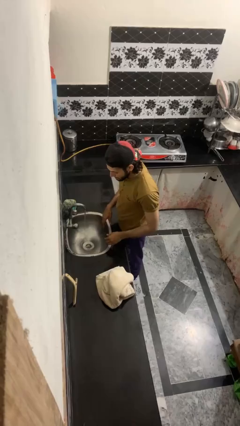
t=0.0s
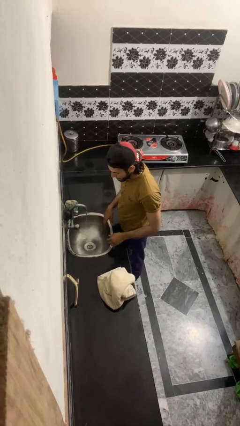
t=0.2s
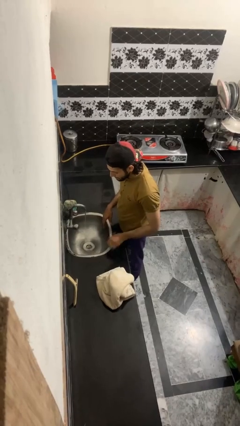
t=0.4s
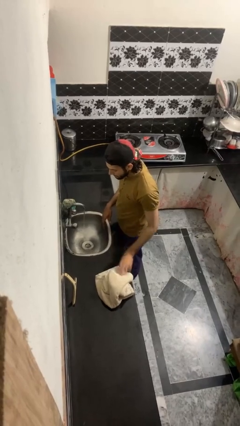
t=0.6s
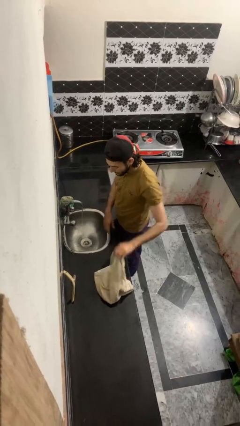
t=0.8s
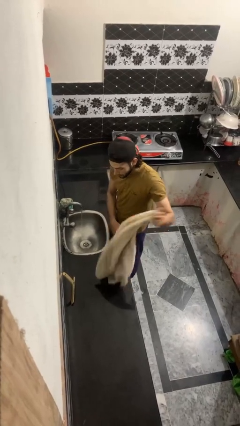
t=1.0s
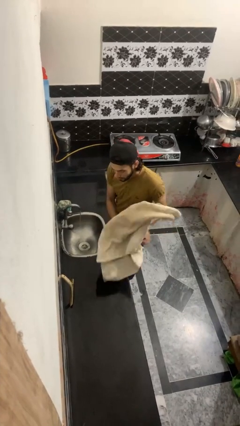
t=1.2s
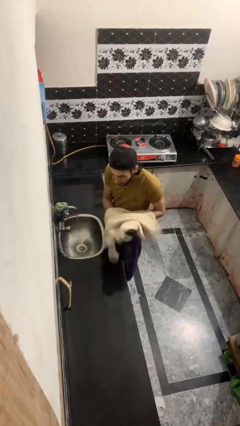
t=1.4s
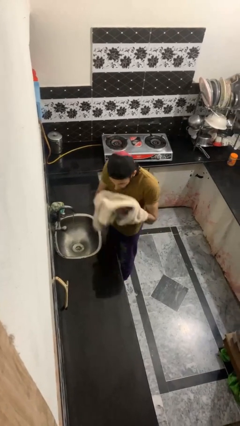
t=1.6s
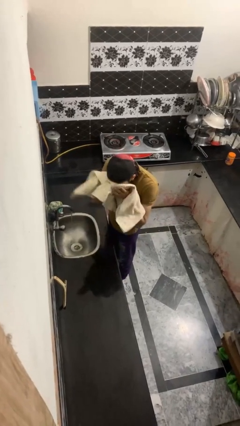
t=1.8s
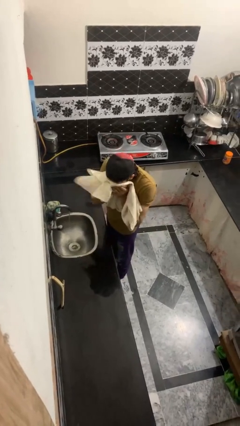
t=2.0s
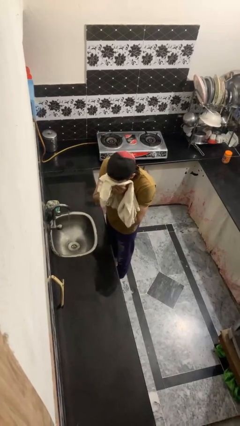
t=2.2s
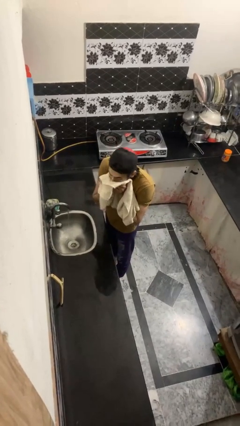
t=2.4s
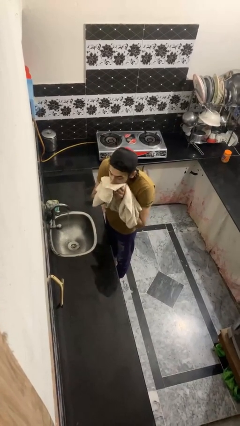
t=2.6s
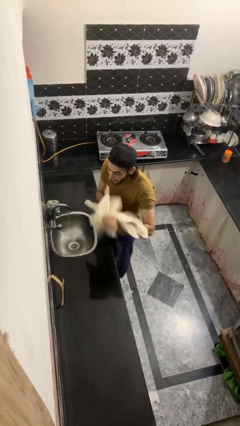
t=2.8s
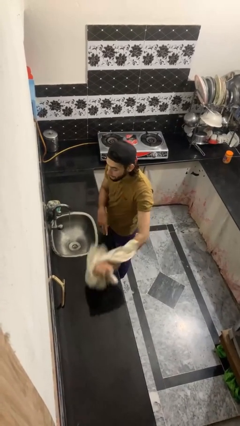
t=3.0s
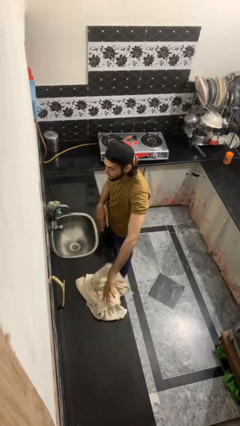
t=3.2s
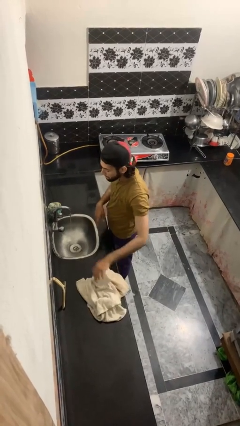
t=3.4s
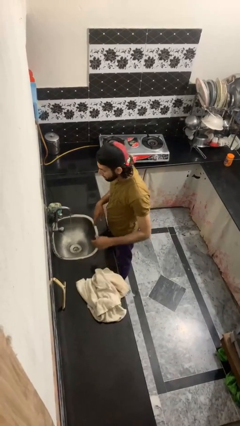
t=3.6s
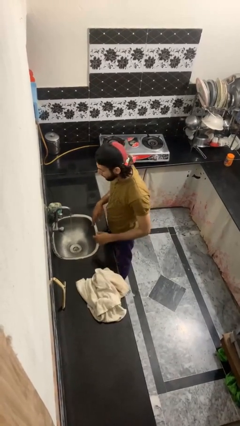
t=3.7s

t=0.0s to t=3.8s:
person dries face with towel

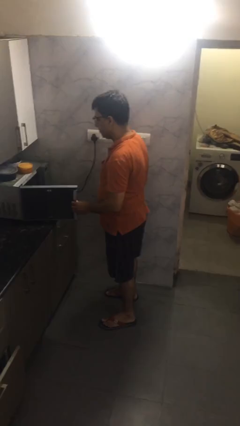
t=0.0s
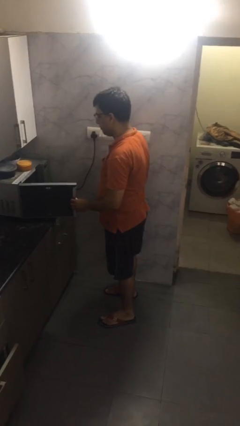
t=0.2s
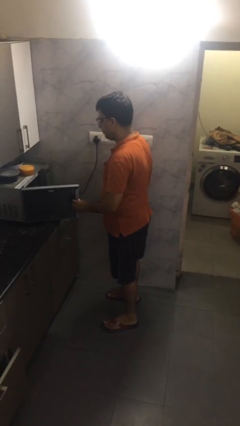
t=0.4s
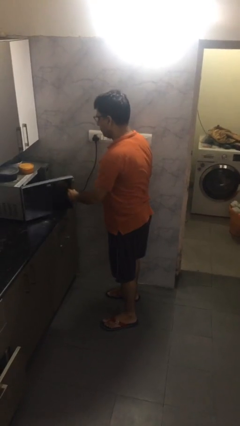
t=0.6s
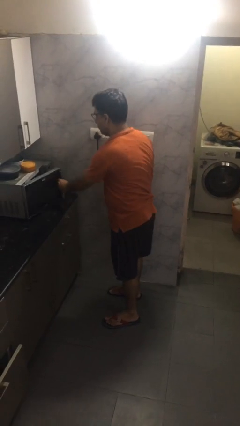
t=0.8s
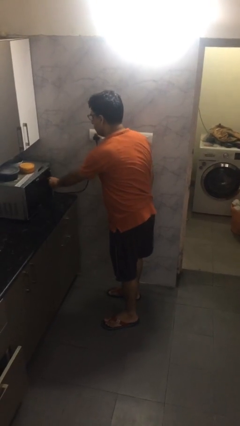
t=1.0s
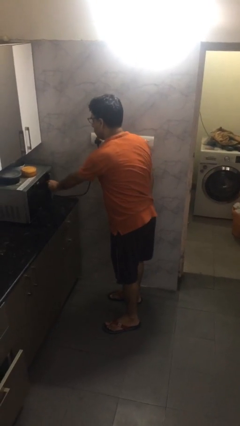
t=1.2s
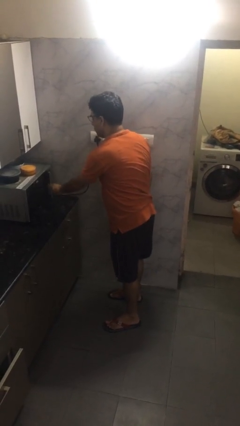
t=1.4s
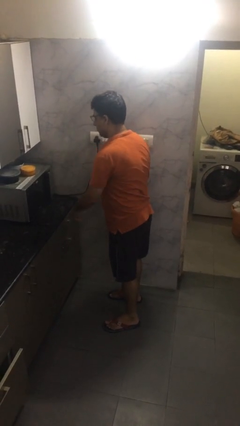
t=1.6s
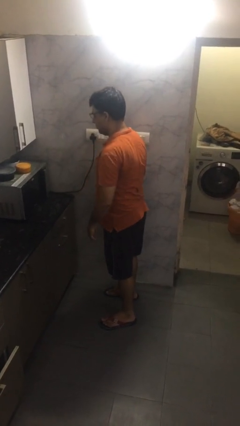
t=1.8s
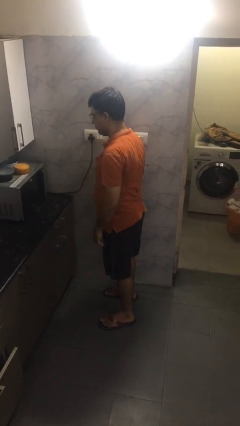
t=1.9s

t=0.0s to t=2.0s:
person closes microwave

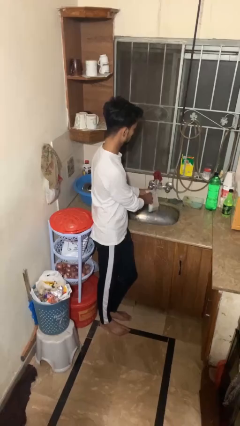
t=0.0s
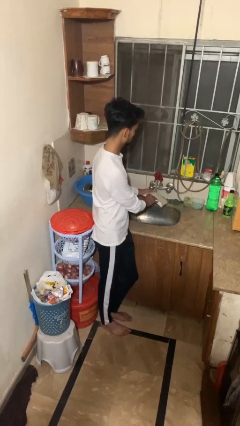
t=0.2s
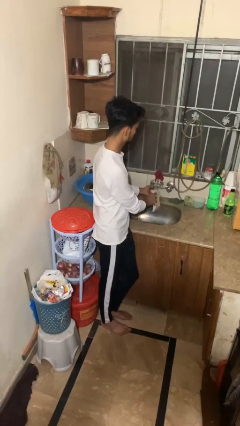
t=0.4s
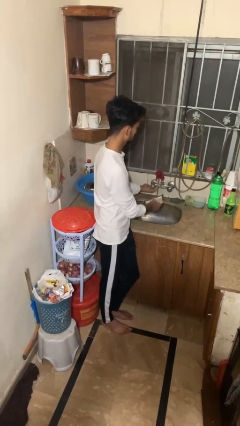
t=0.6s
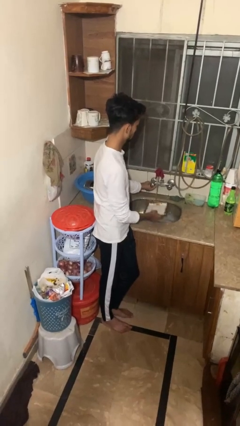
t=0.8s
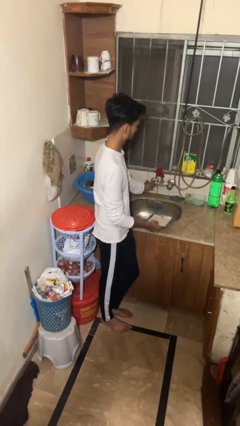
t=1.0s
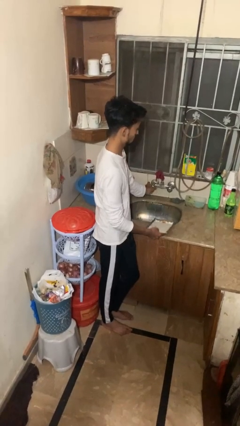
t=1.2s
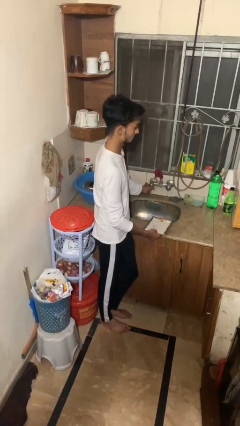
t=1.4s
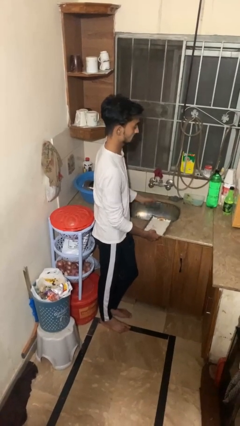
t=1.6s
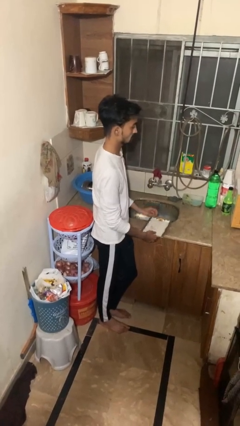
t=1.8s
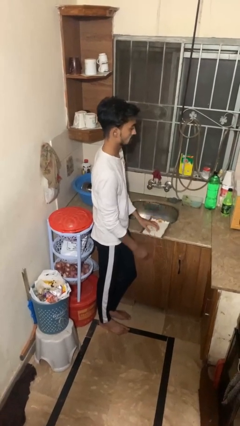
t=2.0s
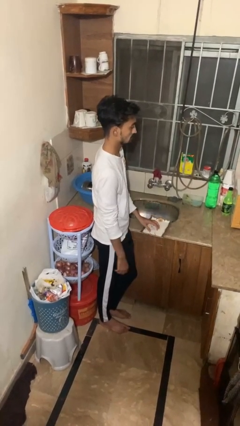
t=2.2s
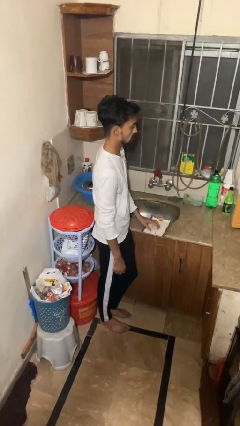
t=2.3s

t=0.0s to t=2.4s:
person closes dishwasher

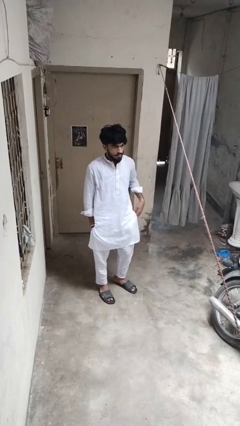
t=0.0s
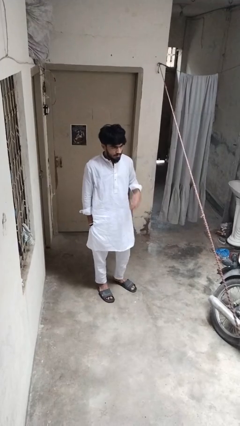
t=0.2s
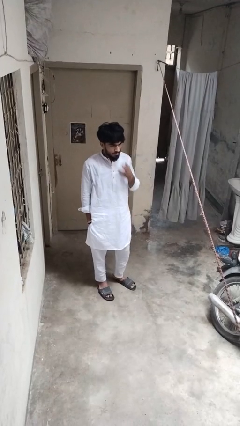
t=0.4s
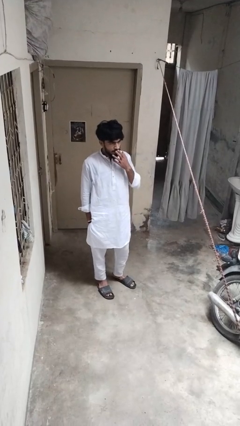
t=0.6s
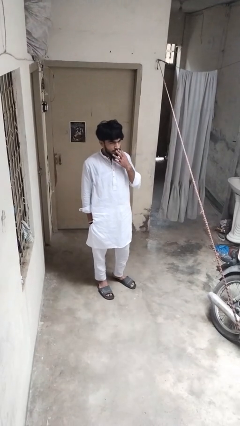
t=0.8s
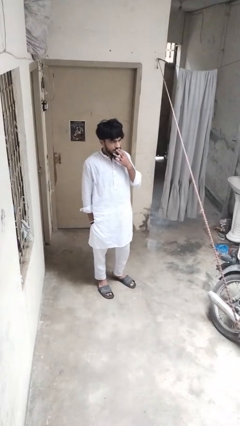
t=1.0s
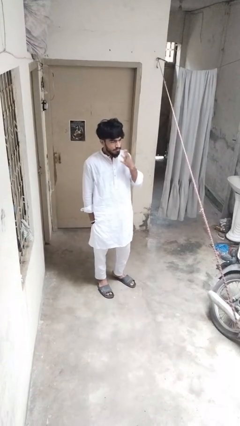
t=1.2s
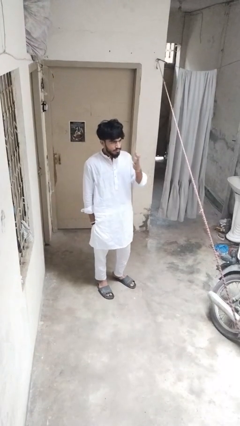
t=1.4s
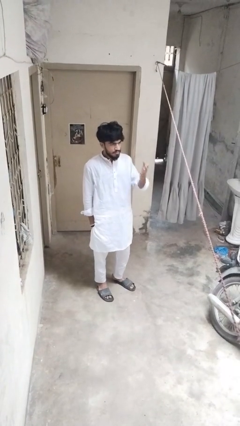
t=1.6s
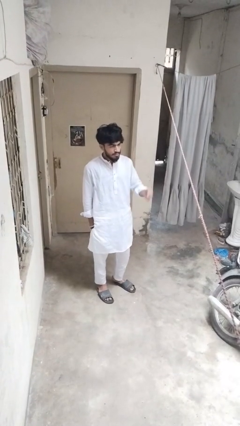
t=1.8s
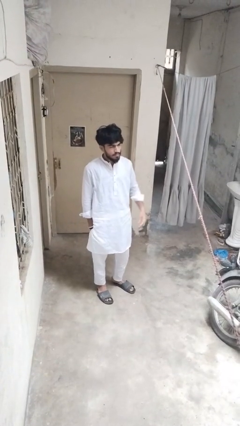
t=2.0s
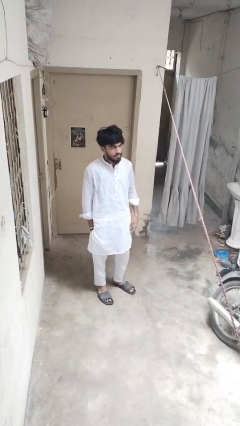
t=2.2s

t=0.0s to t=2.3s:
person gestures blow kiss

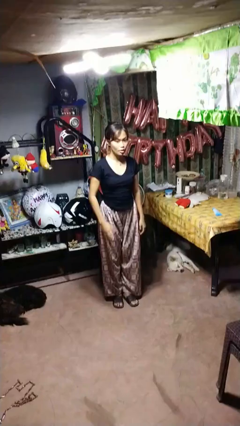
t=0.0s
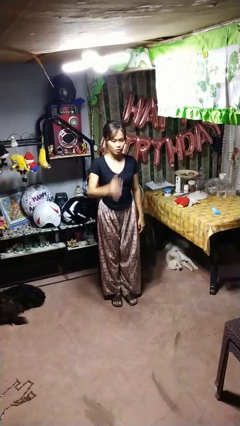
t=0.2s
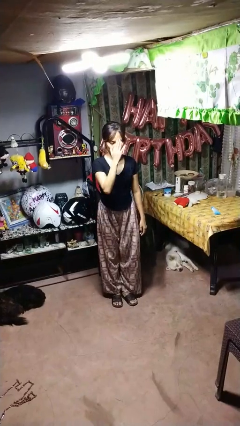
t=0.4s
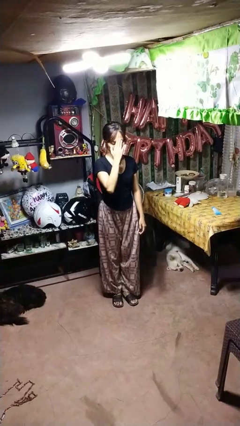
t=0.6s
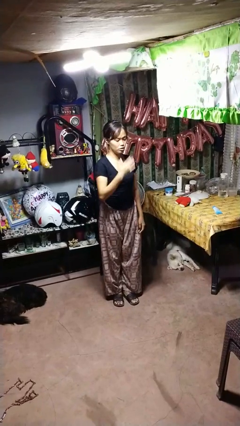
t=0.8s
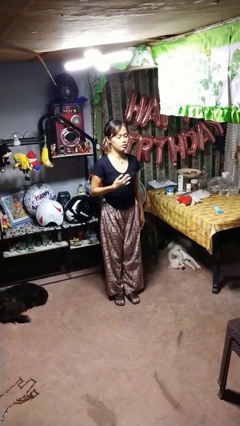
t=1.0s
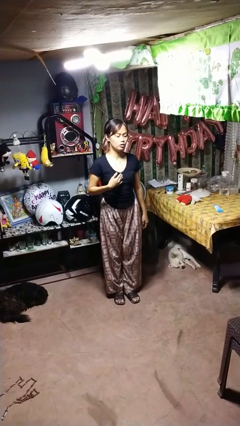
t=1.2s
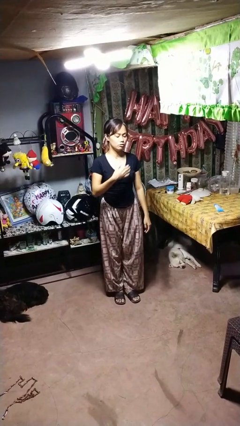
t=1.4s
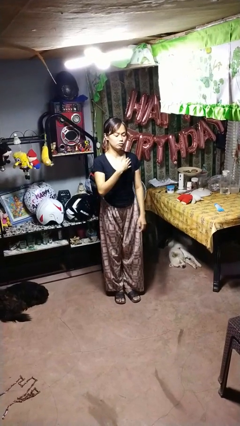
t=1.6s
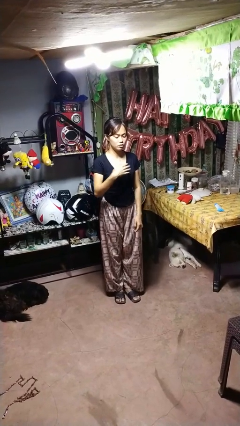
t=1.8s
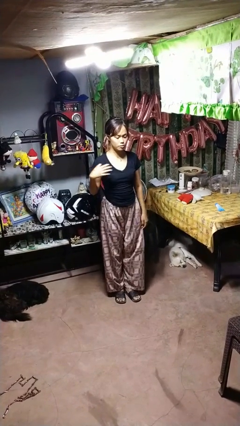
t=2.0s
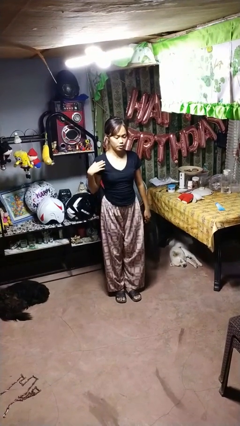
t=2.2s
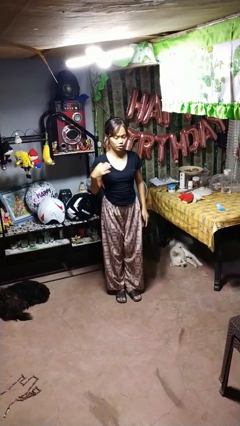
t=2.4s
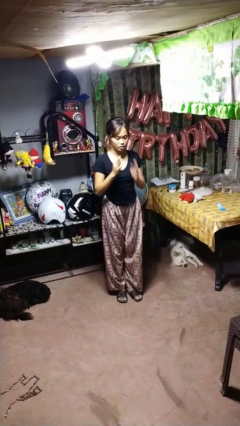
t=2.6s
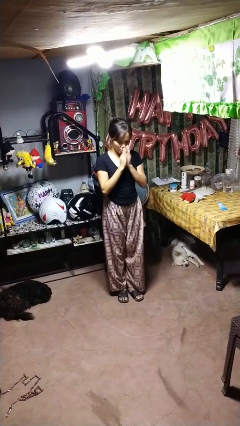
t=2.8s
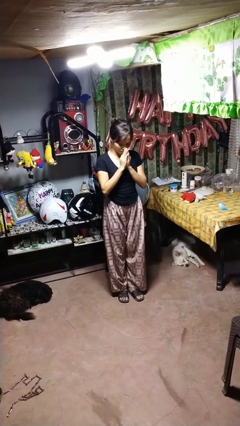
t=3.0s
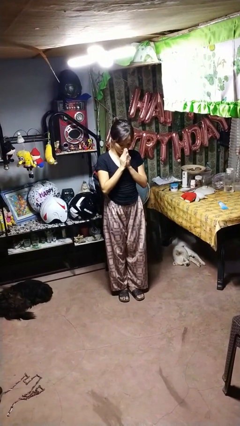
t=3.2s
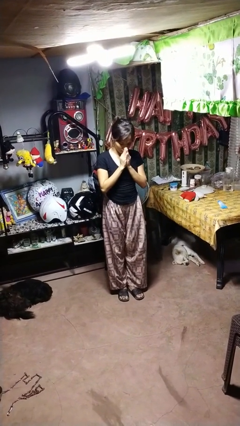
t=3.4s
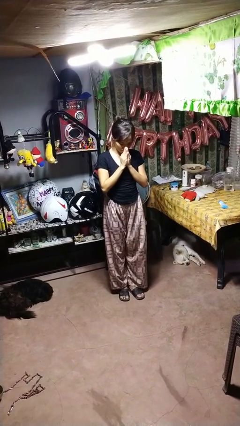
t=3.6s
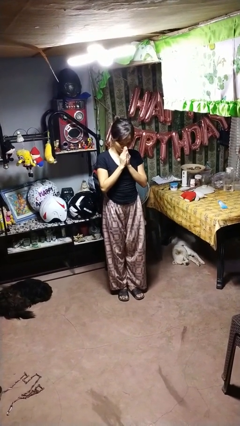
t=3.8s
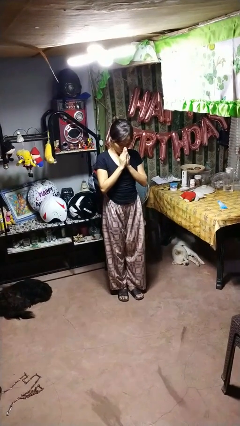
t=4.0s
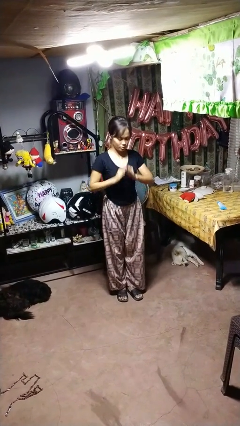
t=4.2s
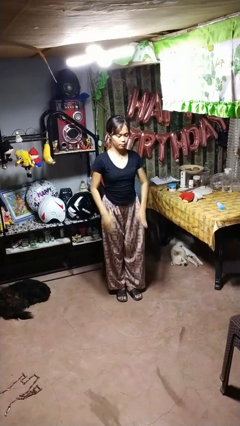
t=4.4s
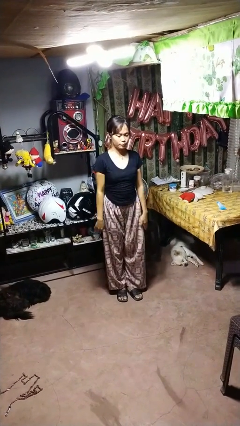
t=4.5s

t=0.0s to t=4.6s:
person prays

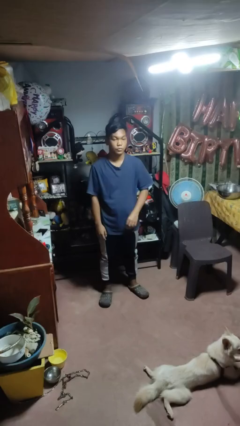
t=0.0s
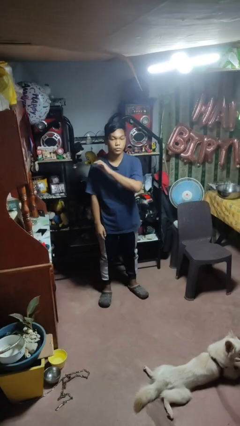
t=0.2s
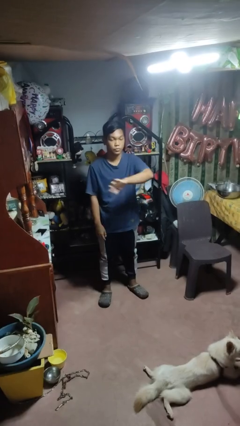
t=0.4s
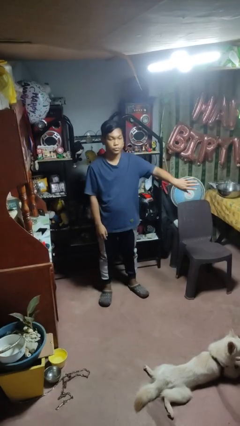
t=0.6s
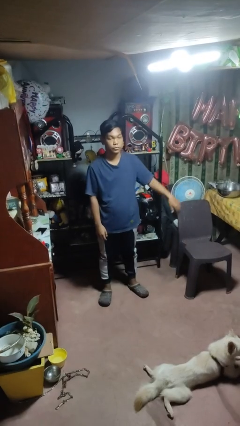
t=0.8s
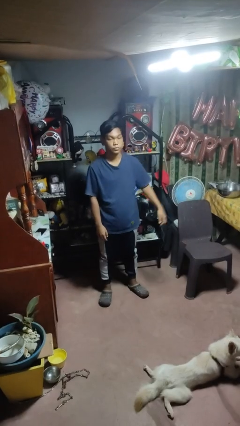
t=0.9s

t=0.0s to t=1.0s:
person gestures swipe left

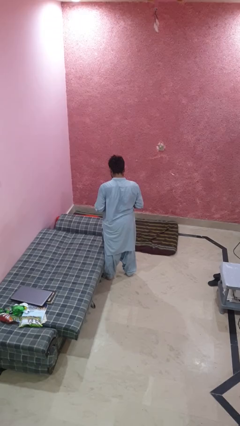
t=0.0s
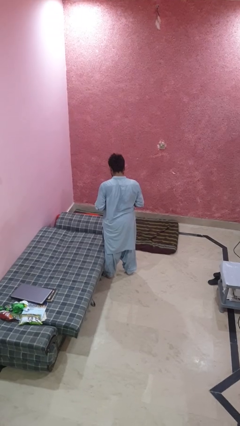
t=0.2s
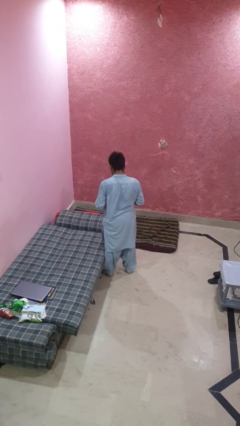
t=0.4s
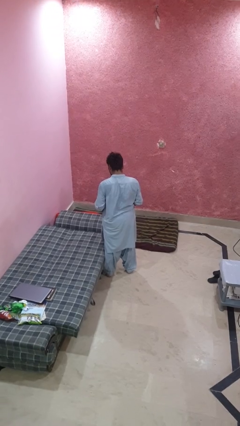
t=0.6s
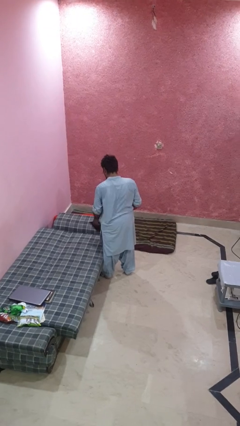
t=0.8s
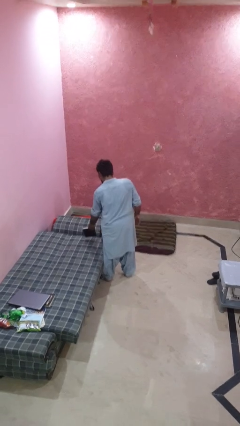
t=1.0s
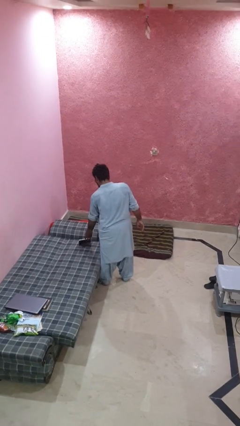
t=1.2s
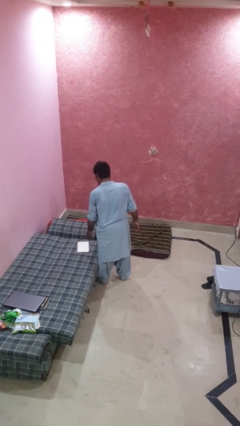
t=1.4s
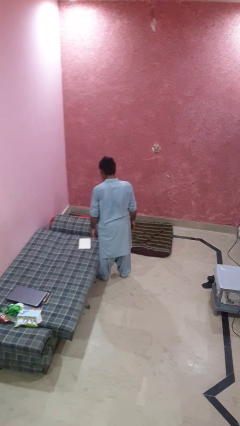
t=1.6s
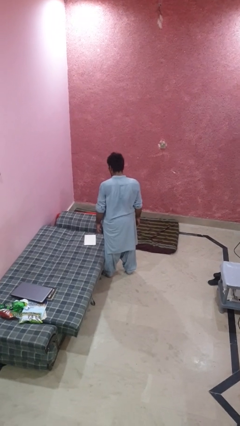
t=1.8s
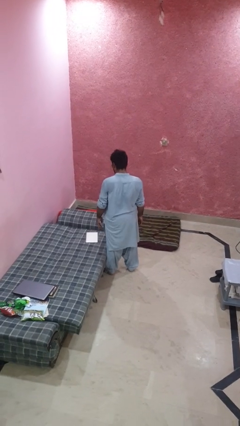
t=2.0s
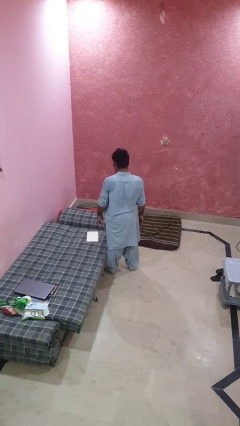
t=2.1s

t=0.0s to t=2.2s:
person puts down object on bed
